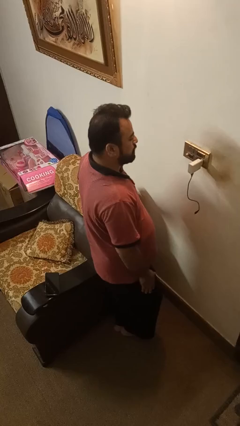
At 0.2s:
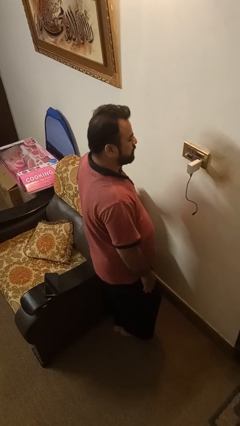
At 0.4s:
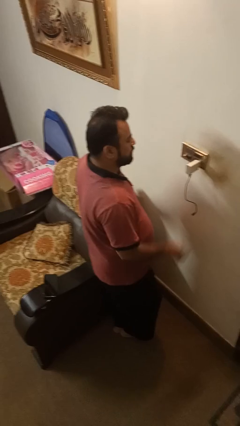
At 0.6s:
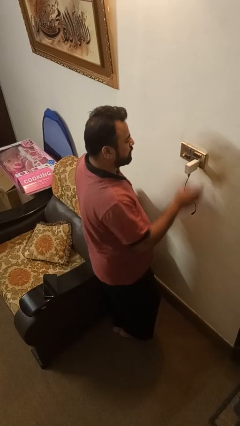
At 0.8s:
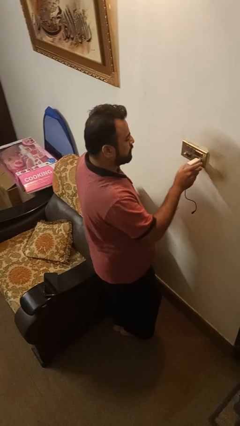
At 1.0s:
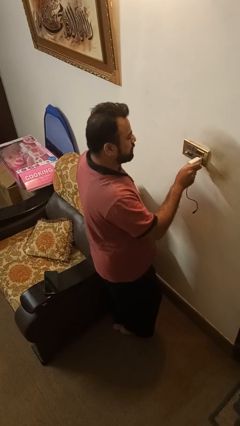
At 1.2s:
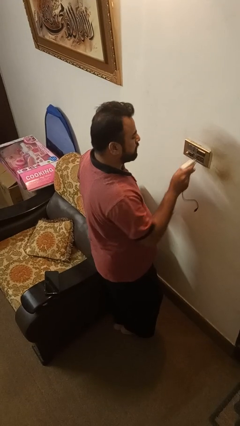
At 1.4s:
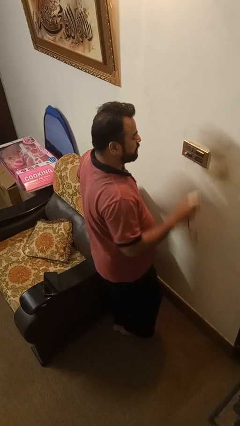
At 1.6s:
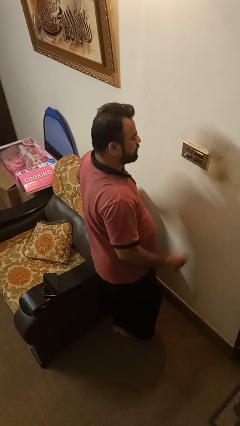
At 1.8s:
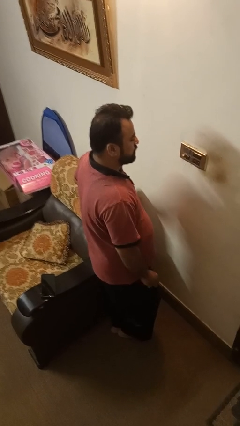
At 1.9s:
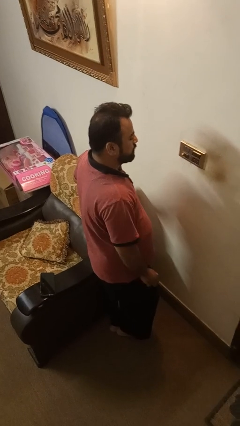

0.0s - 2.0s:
person unplugs from electrical socket

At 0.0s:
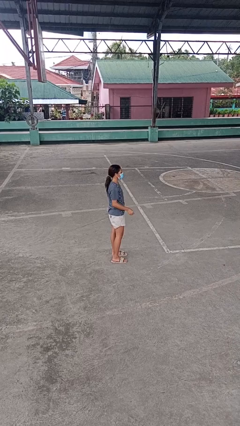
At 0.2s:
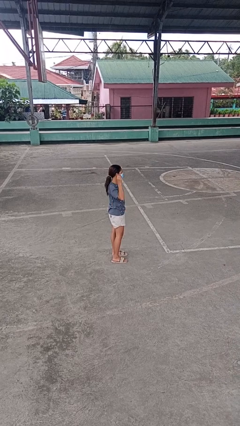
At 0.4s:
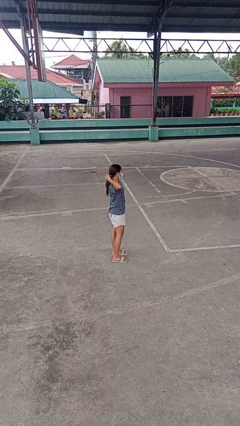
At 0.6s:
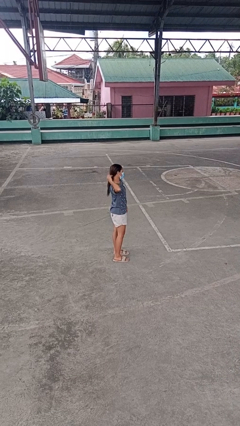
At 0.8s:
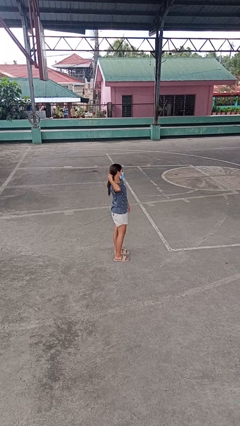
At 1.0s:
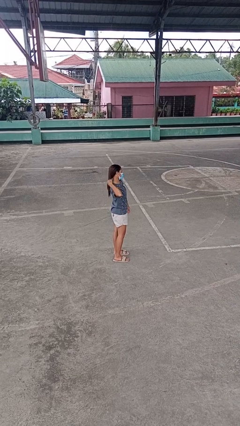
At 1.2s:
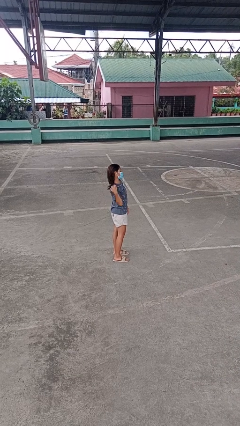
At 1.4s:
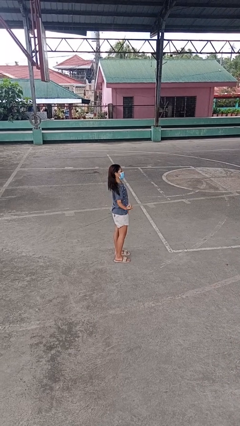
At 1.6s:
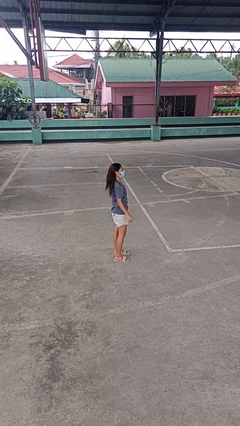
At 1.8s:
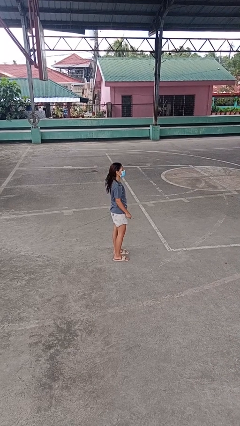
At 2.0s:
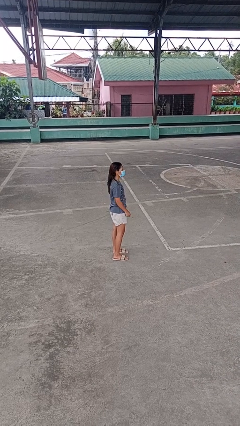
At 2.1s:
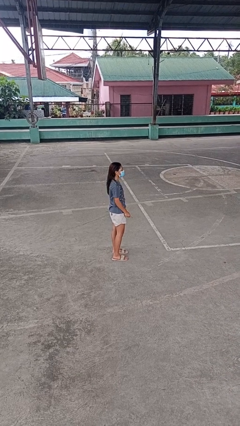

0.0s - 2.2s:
person takes off hairtie

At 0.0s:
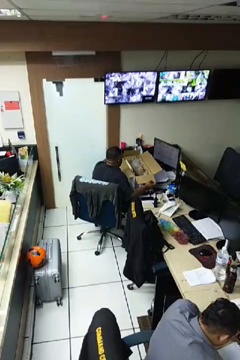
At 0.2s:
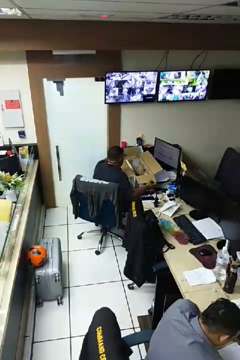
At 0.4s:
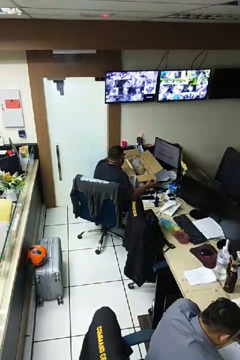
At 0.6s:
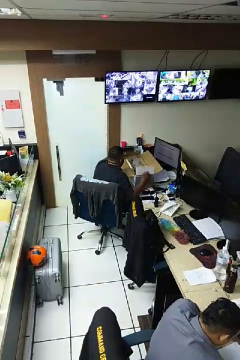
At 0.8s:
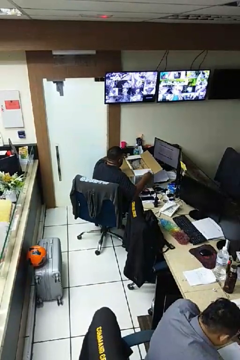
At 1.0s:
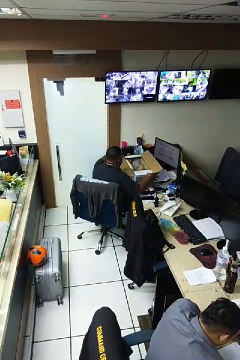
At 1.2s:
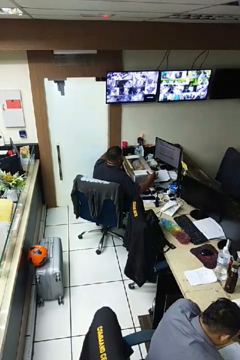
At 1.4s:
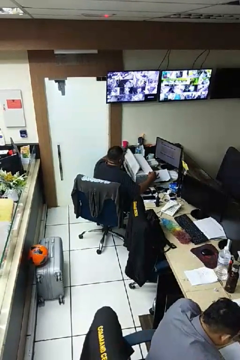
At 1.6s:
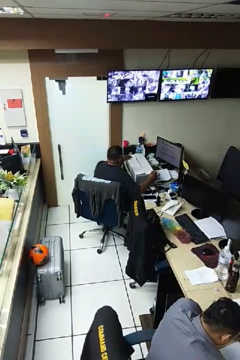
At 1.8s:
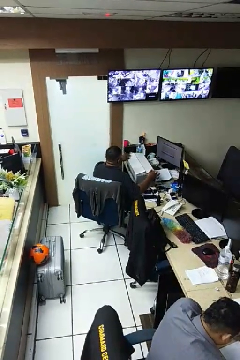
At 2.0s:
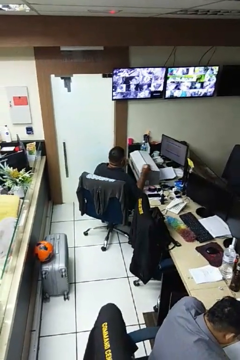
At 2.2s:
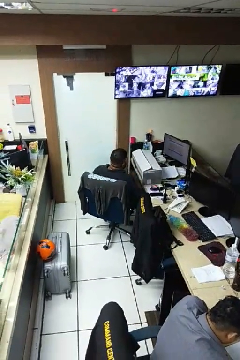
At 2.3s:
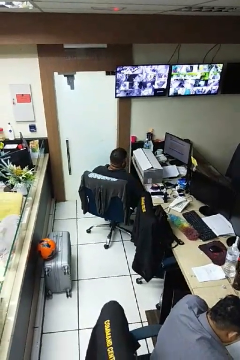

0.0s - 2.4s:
person closes box

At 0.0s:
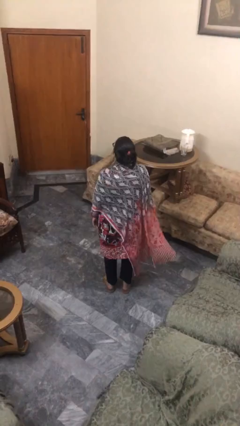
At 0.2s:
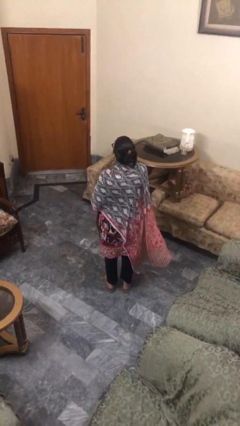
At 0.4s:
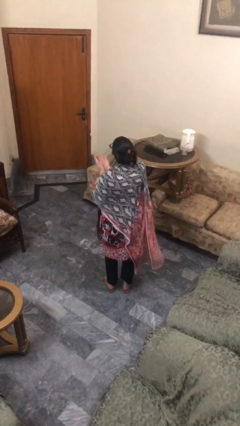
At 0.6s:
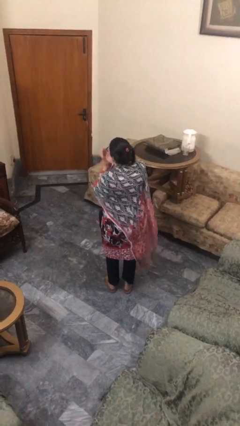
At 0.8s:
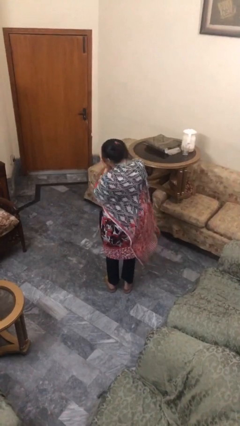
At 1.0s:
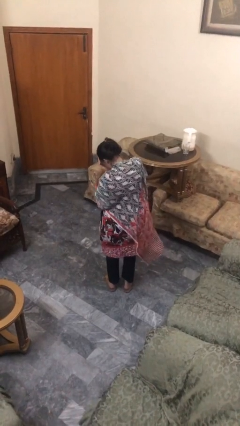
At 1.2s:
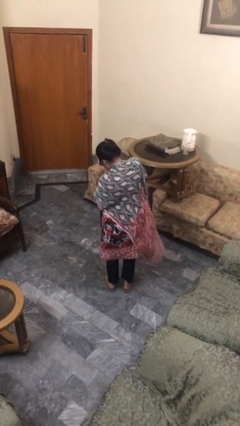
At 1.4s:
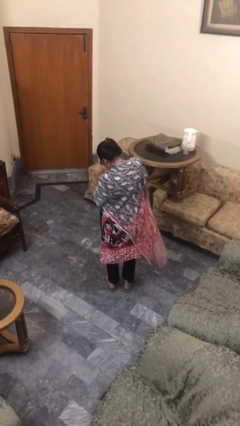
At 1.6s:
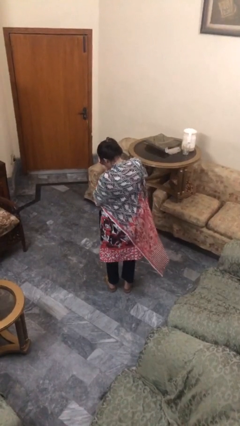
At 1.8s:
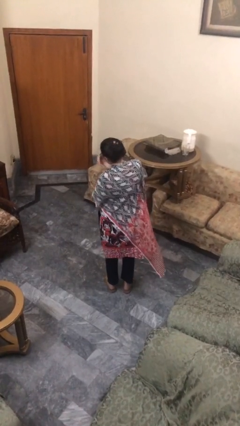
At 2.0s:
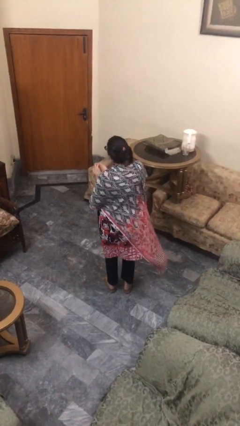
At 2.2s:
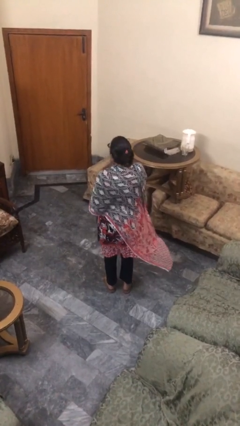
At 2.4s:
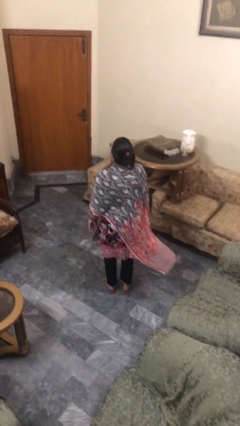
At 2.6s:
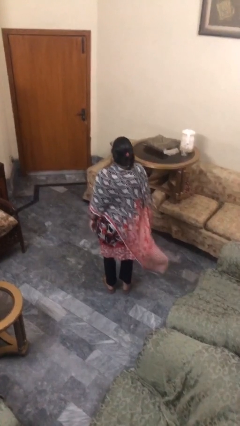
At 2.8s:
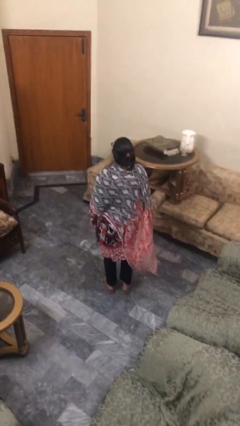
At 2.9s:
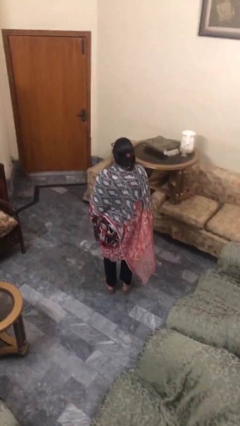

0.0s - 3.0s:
person sneezes into hand

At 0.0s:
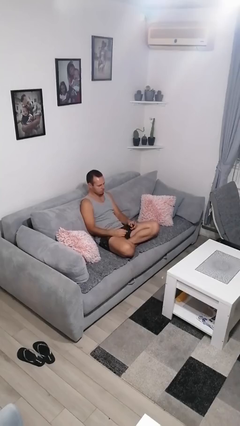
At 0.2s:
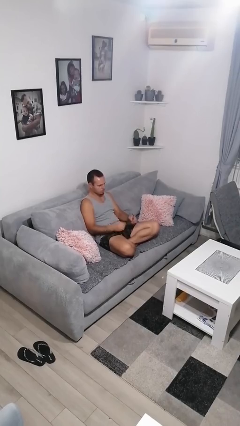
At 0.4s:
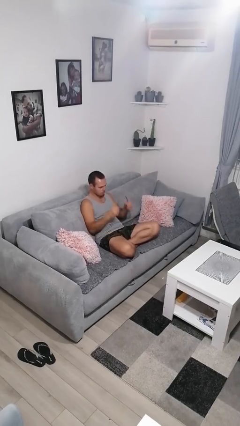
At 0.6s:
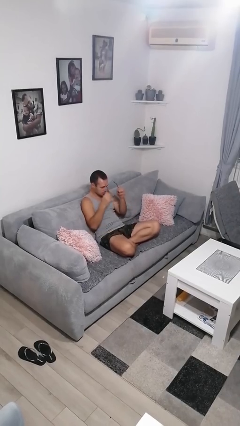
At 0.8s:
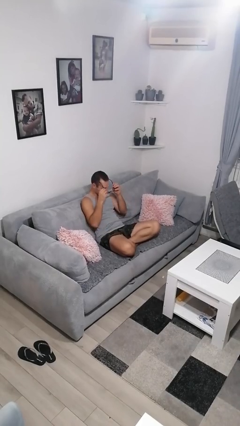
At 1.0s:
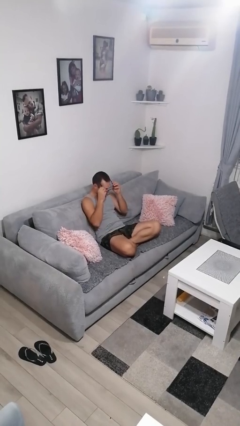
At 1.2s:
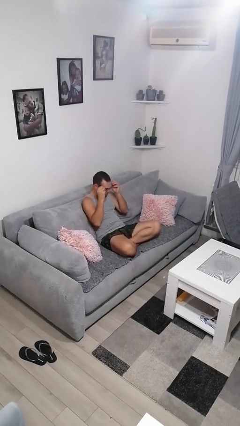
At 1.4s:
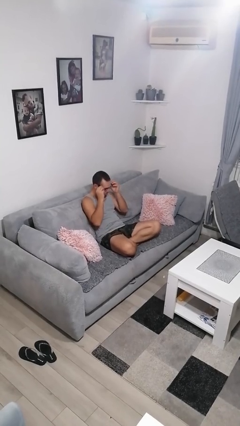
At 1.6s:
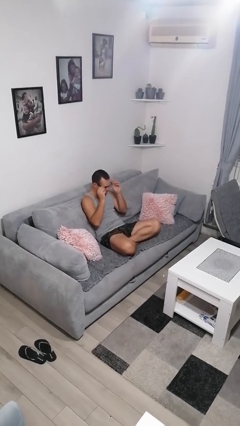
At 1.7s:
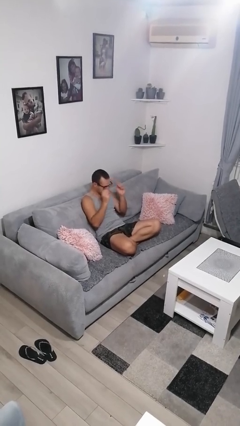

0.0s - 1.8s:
person puts on glasses

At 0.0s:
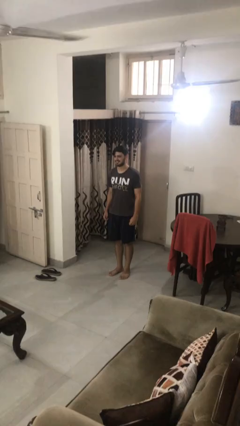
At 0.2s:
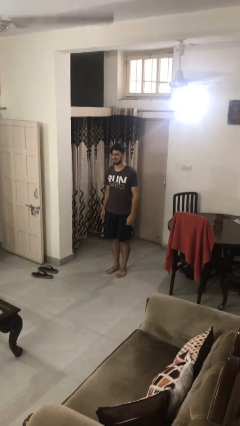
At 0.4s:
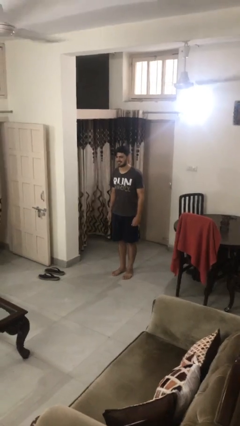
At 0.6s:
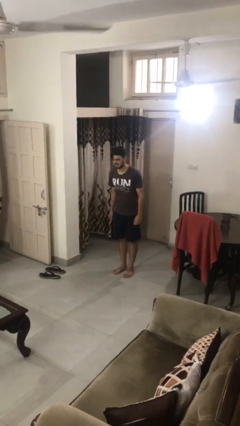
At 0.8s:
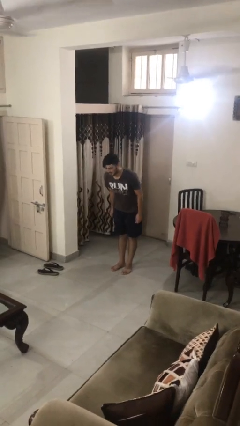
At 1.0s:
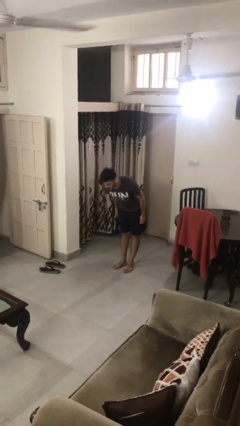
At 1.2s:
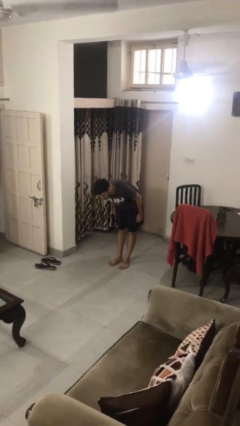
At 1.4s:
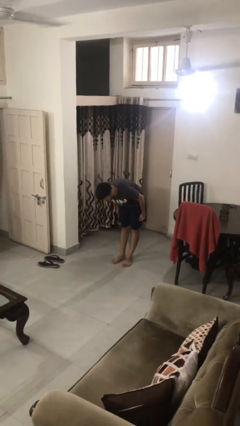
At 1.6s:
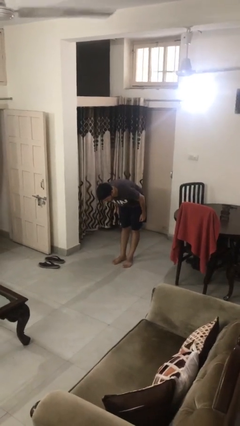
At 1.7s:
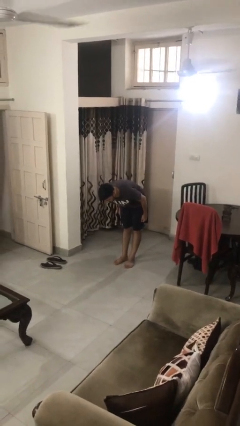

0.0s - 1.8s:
person bows

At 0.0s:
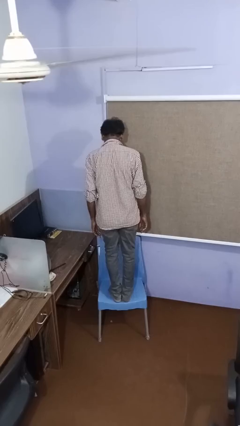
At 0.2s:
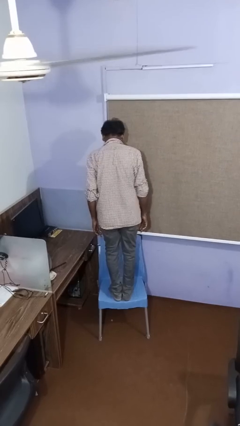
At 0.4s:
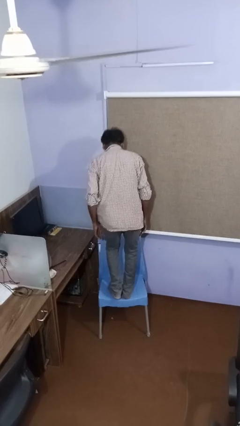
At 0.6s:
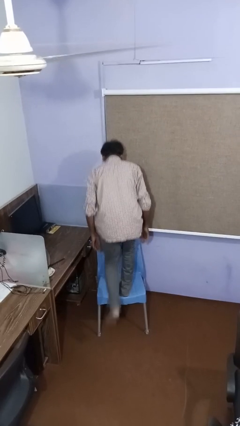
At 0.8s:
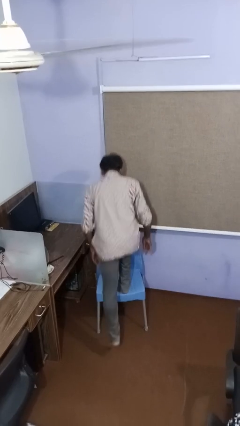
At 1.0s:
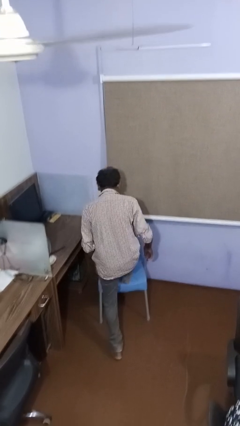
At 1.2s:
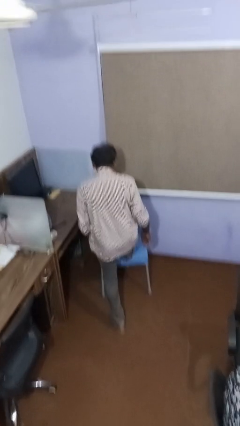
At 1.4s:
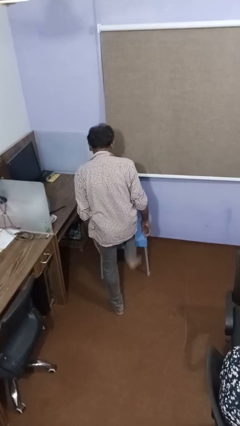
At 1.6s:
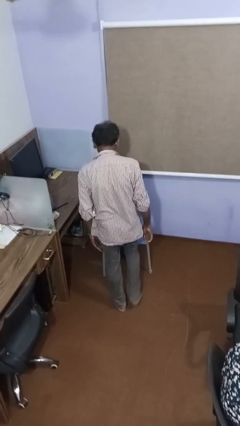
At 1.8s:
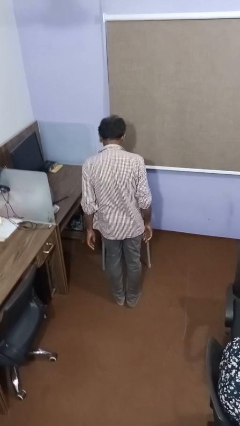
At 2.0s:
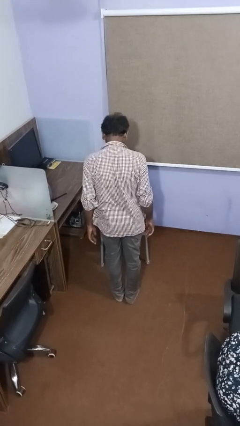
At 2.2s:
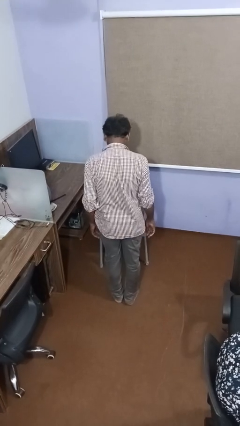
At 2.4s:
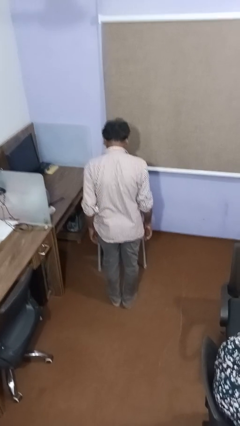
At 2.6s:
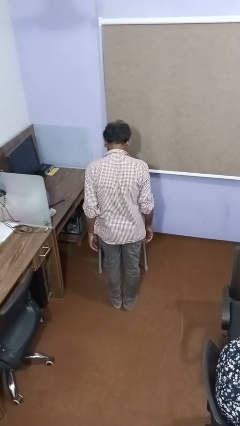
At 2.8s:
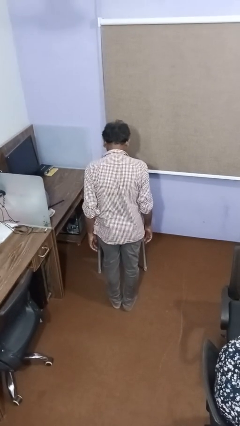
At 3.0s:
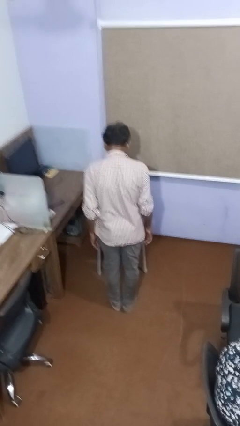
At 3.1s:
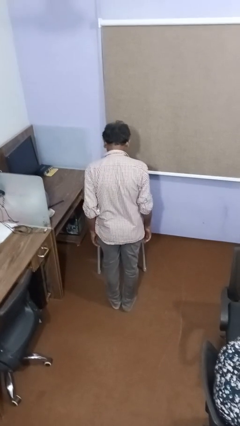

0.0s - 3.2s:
person climbs off chair

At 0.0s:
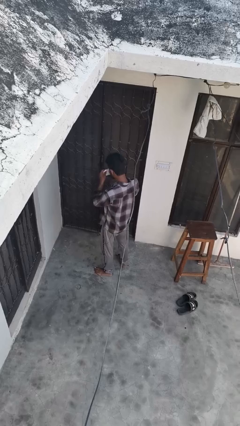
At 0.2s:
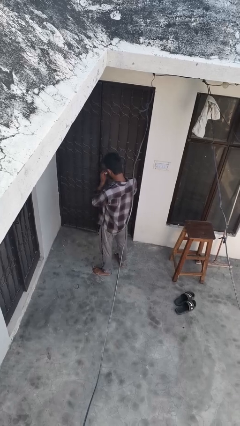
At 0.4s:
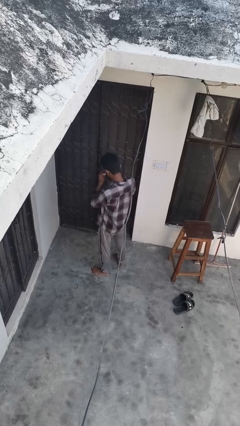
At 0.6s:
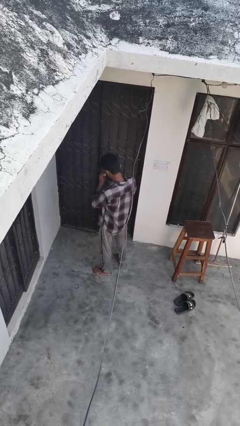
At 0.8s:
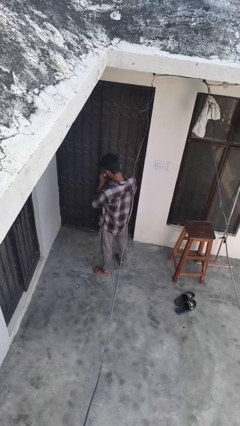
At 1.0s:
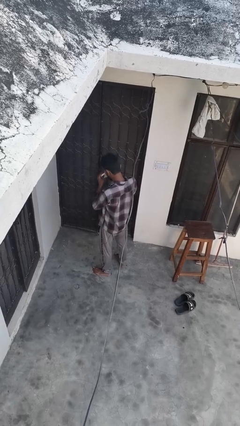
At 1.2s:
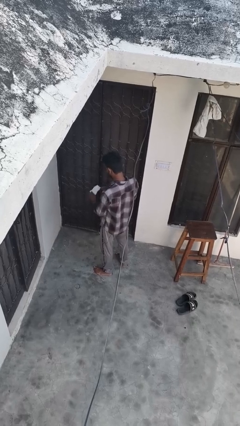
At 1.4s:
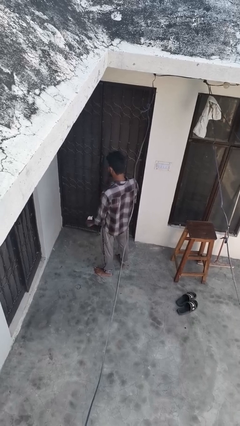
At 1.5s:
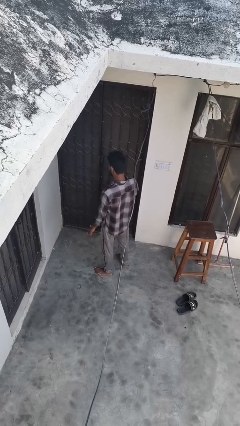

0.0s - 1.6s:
person wipes mouth with napkin
